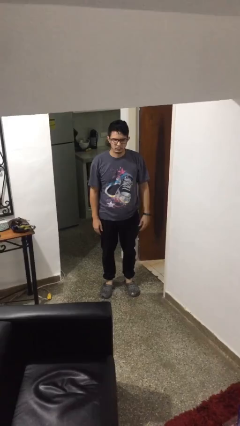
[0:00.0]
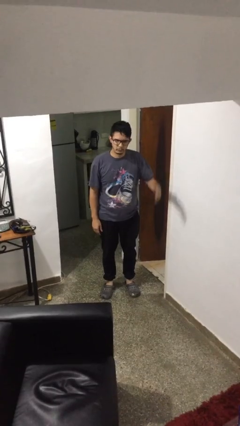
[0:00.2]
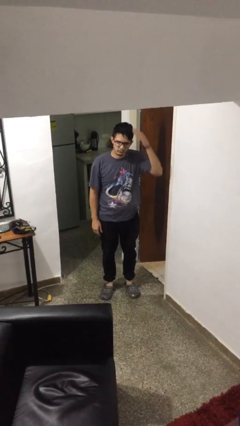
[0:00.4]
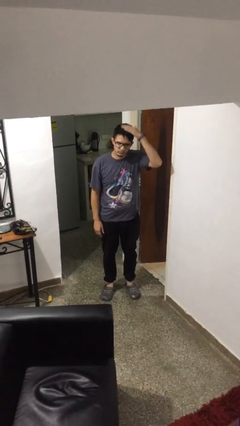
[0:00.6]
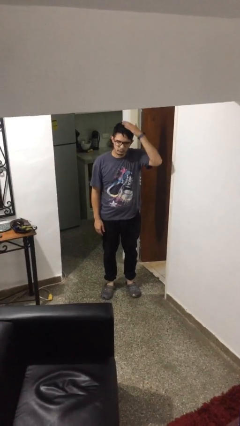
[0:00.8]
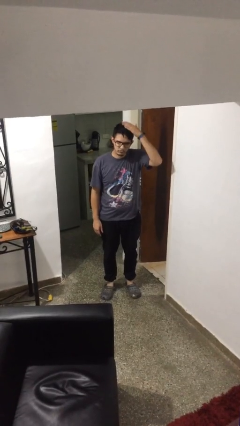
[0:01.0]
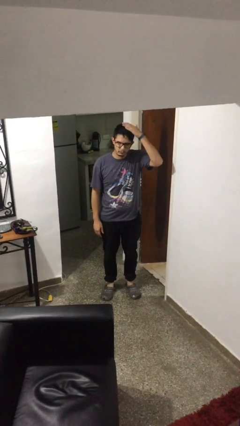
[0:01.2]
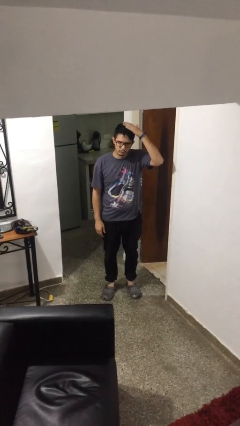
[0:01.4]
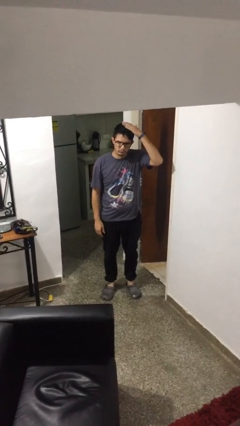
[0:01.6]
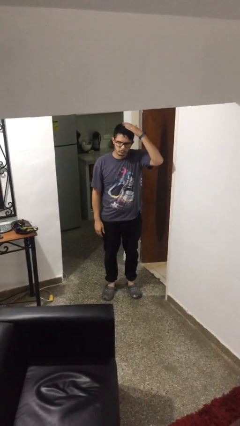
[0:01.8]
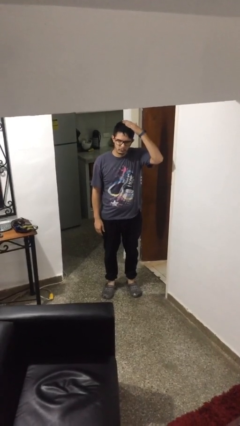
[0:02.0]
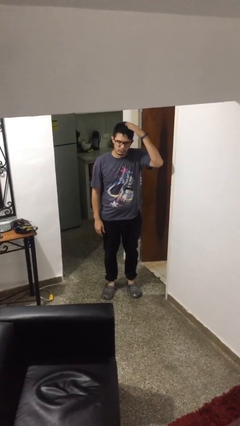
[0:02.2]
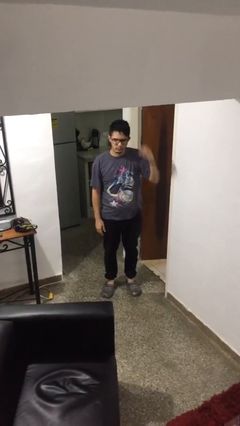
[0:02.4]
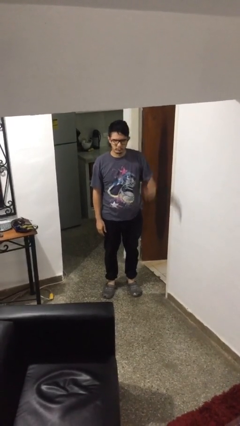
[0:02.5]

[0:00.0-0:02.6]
person pats head

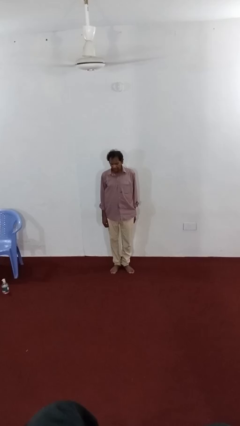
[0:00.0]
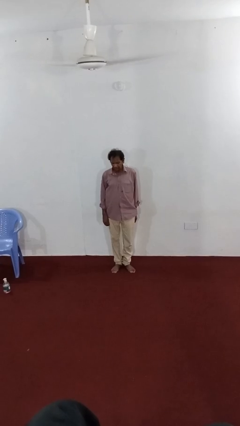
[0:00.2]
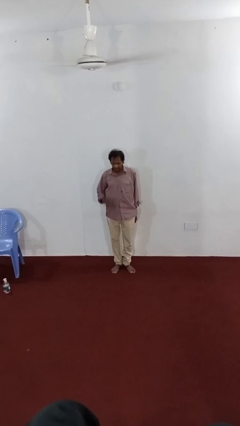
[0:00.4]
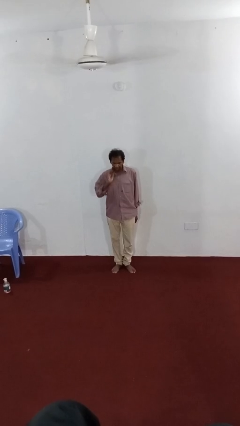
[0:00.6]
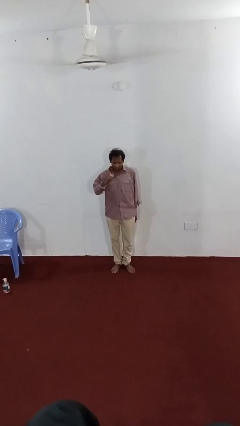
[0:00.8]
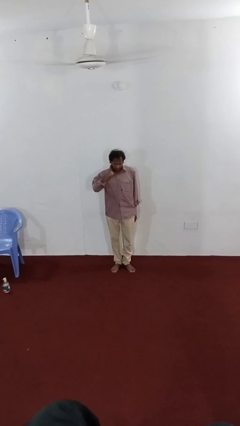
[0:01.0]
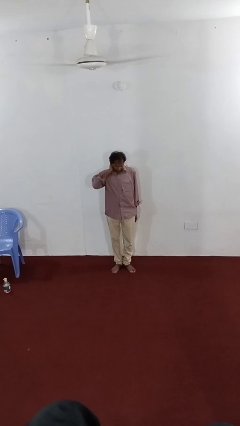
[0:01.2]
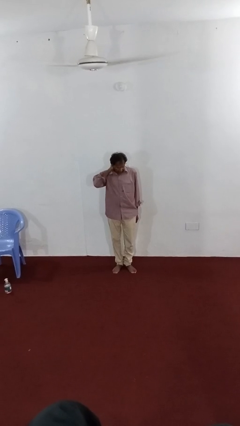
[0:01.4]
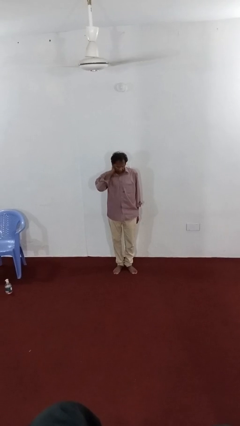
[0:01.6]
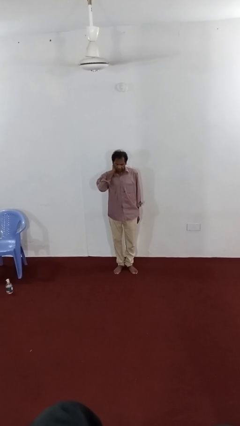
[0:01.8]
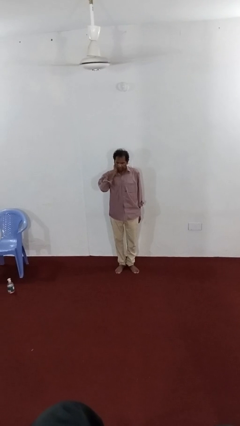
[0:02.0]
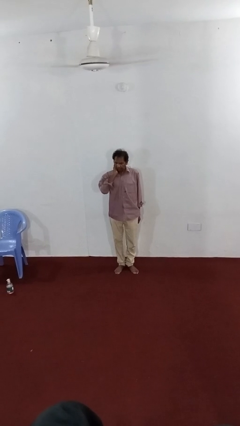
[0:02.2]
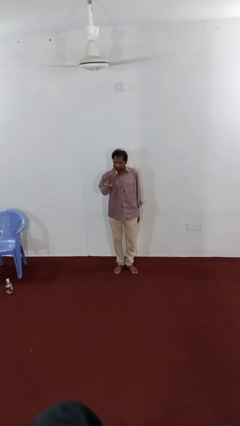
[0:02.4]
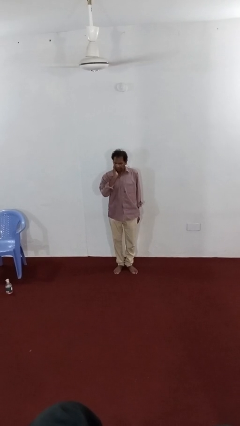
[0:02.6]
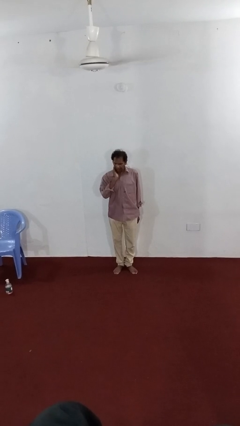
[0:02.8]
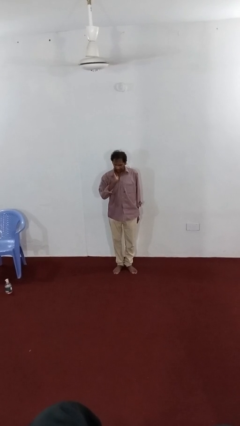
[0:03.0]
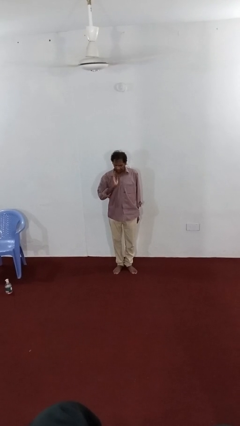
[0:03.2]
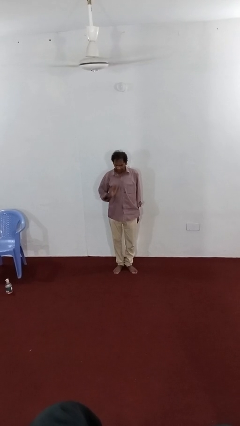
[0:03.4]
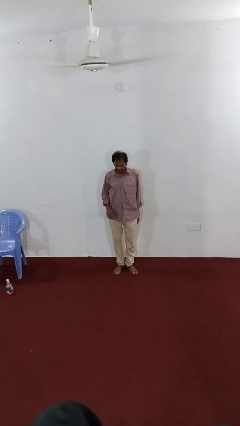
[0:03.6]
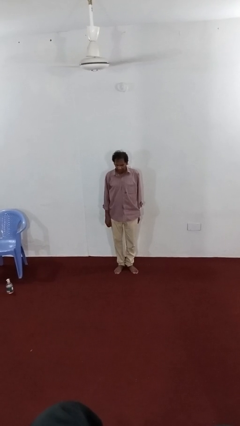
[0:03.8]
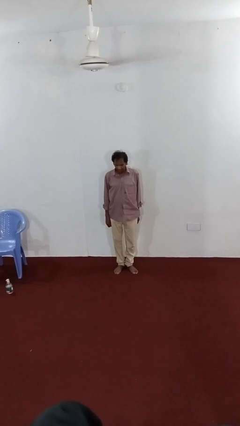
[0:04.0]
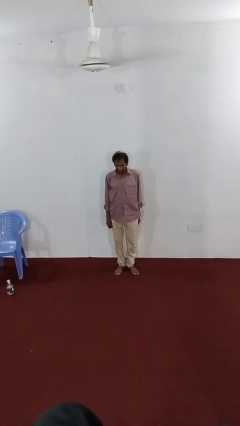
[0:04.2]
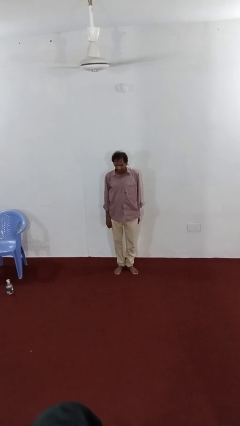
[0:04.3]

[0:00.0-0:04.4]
person rubs neck

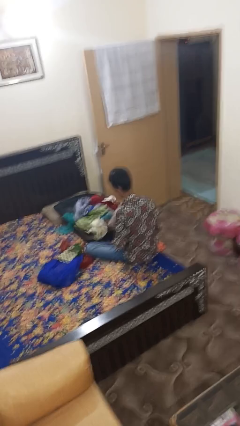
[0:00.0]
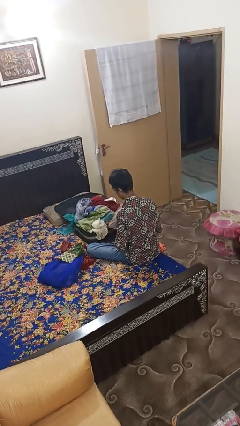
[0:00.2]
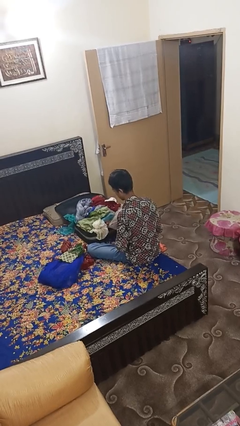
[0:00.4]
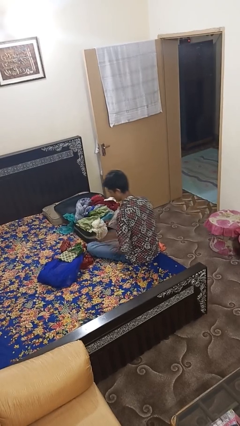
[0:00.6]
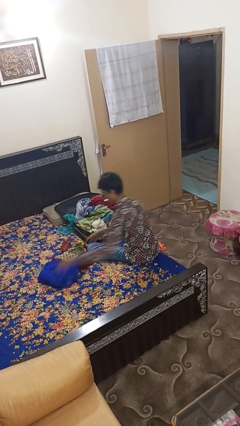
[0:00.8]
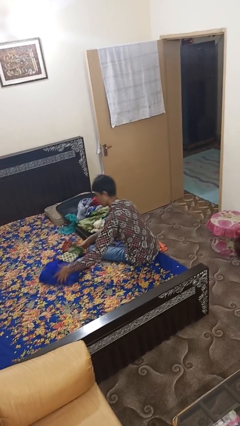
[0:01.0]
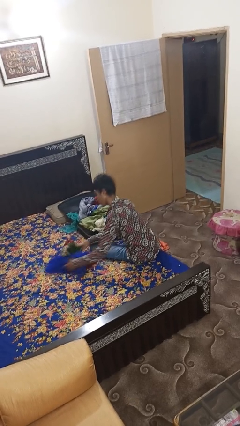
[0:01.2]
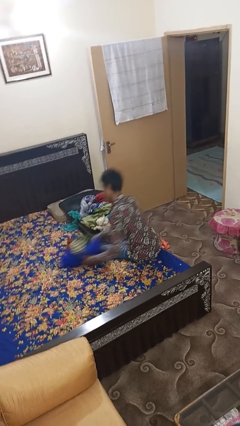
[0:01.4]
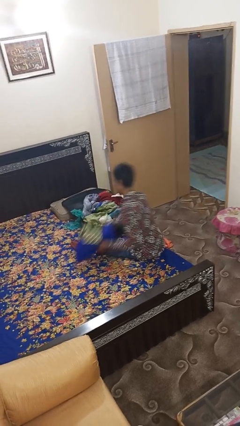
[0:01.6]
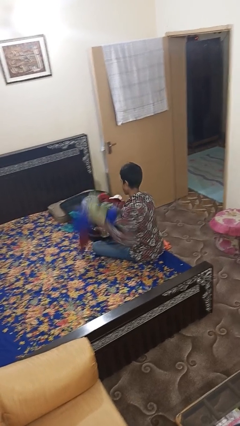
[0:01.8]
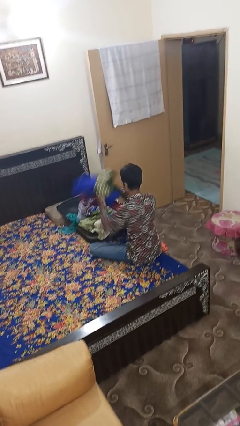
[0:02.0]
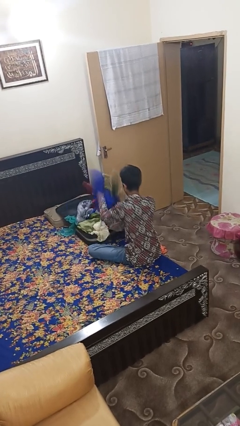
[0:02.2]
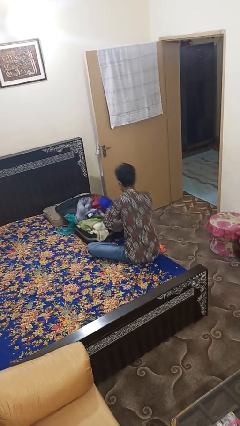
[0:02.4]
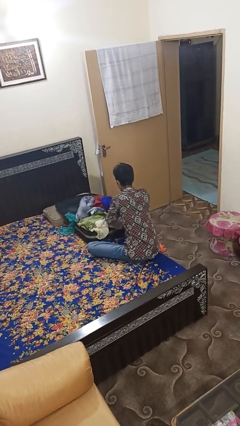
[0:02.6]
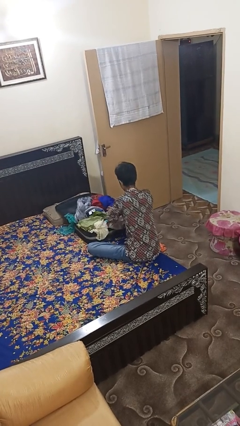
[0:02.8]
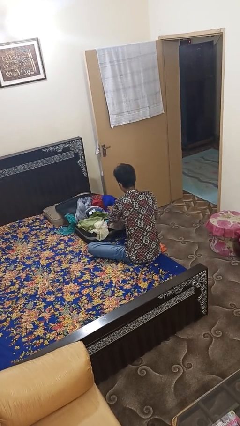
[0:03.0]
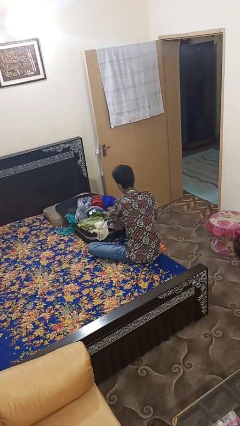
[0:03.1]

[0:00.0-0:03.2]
person loads clothes into suitcase

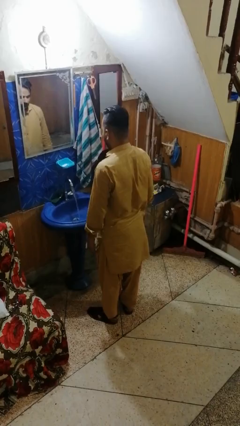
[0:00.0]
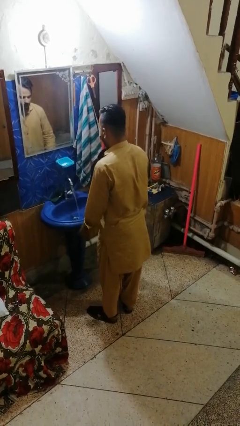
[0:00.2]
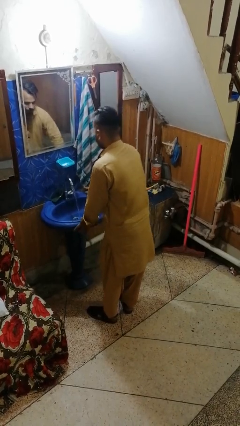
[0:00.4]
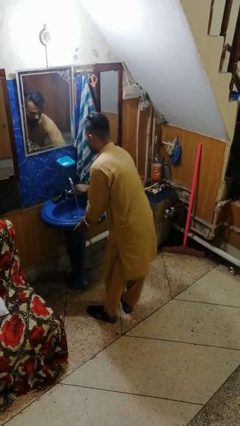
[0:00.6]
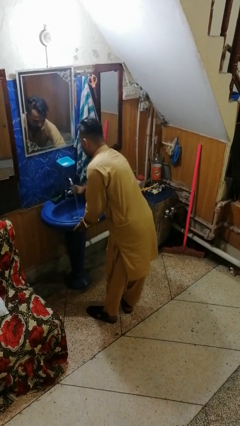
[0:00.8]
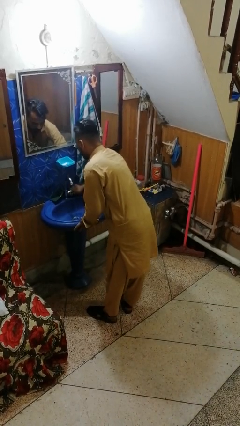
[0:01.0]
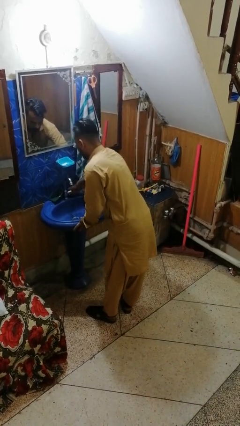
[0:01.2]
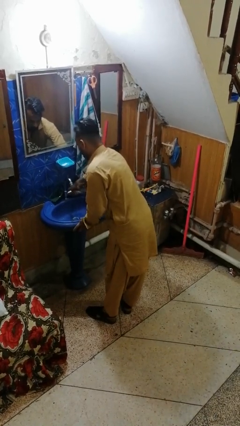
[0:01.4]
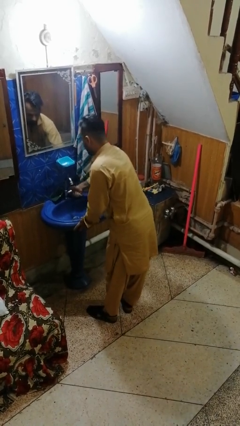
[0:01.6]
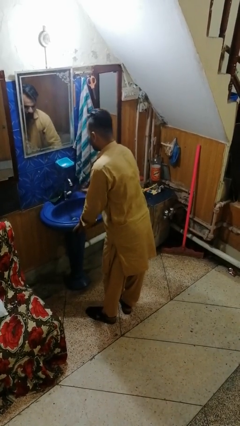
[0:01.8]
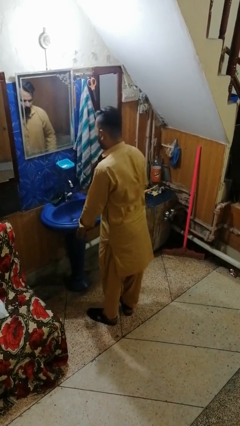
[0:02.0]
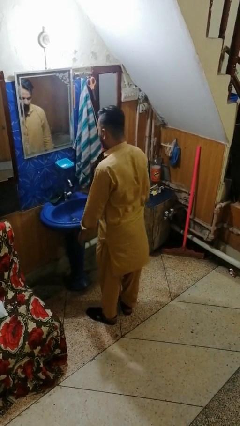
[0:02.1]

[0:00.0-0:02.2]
person turns off faucet

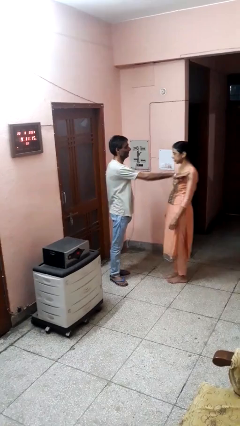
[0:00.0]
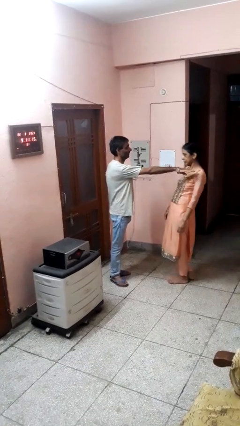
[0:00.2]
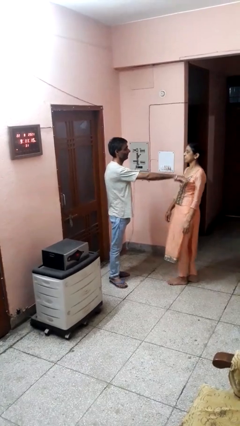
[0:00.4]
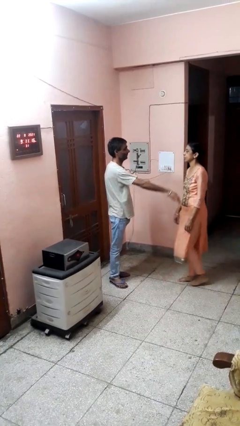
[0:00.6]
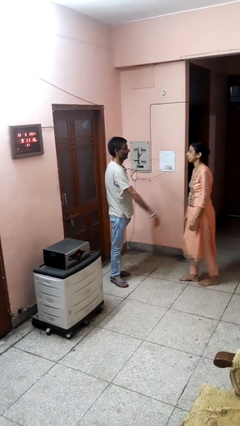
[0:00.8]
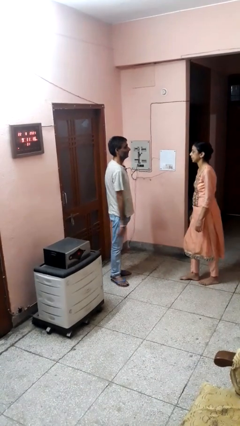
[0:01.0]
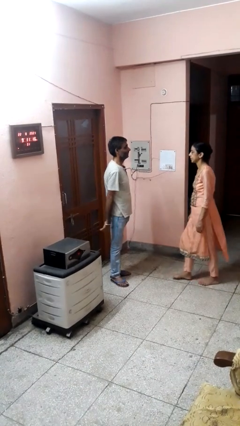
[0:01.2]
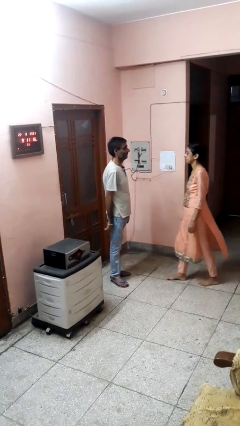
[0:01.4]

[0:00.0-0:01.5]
person shoves person

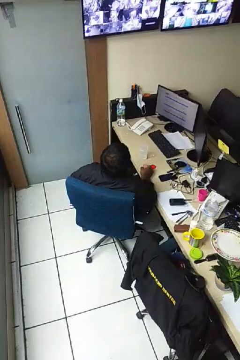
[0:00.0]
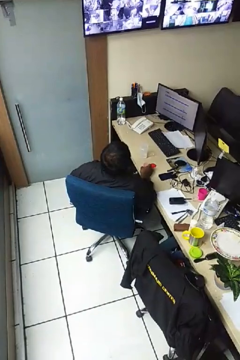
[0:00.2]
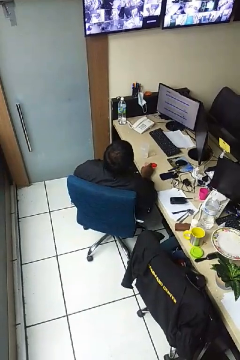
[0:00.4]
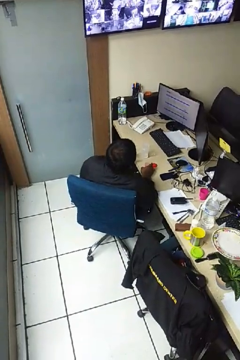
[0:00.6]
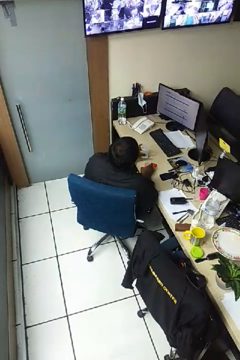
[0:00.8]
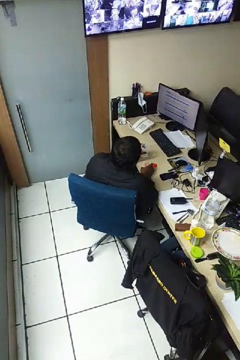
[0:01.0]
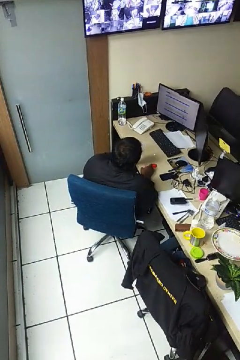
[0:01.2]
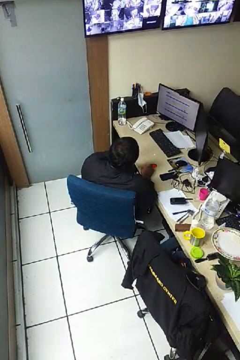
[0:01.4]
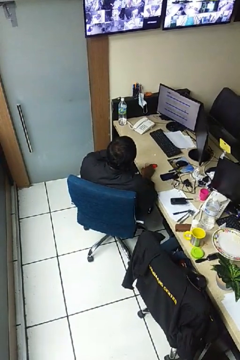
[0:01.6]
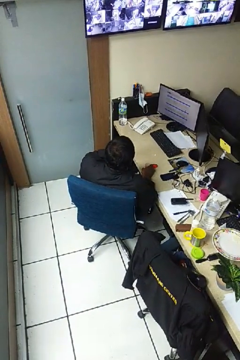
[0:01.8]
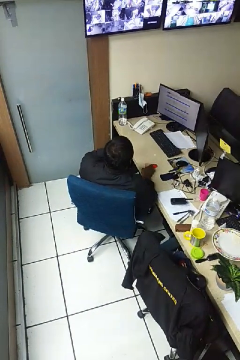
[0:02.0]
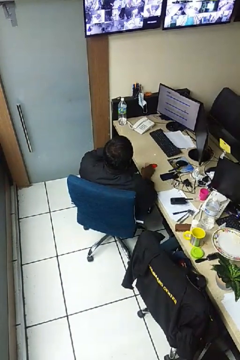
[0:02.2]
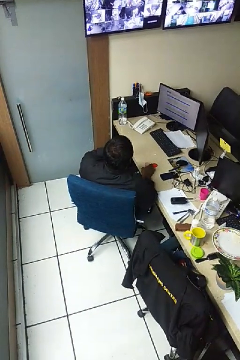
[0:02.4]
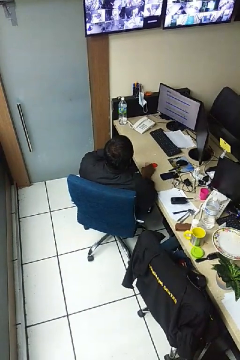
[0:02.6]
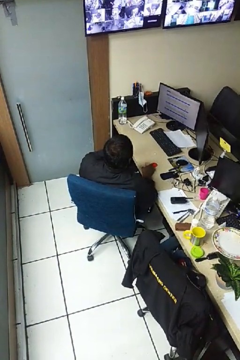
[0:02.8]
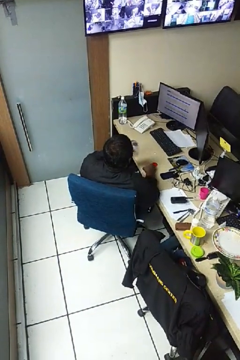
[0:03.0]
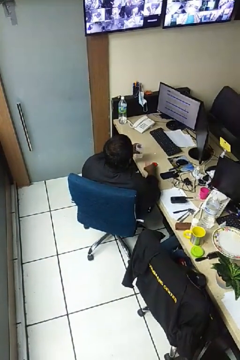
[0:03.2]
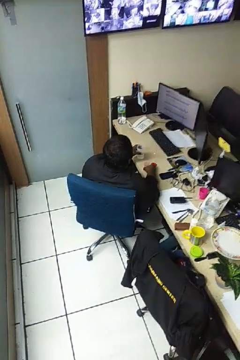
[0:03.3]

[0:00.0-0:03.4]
person drinks from cup

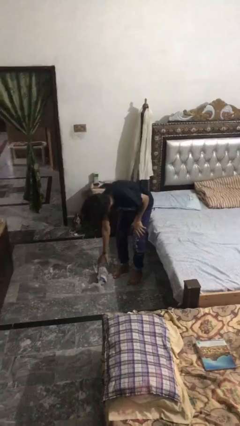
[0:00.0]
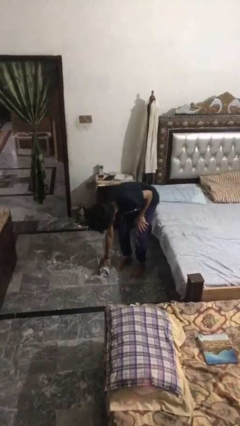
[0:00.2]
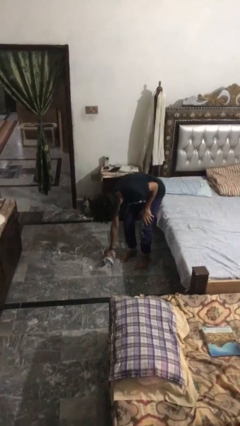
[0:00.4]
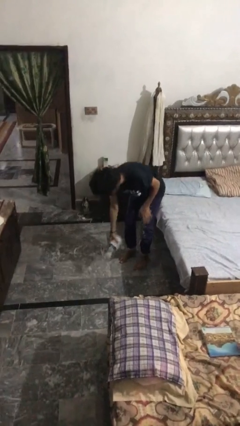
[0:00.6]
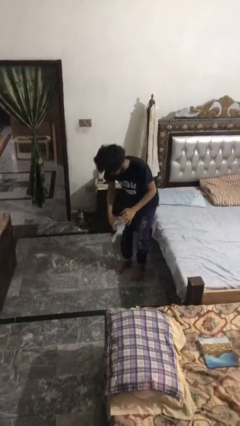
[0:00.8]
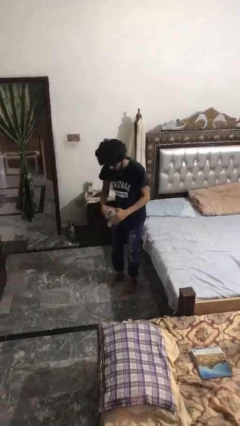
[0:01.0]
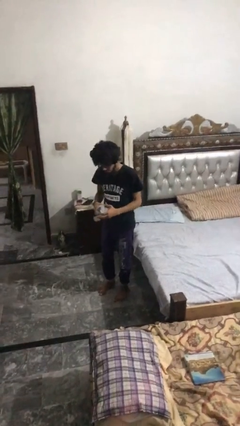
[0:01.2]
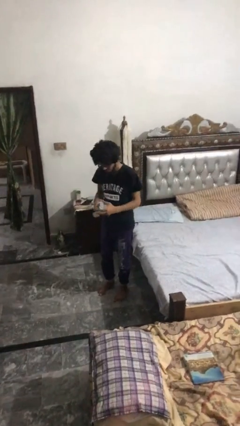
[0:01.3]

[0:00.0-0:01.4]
person picks up object from floor
